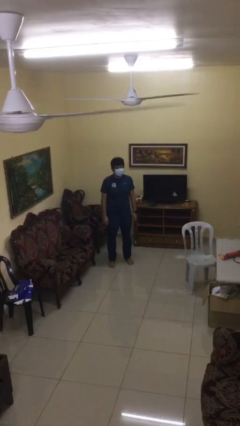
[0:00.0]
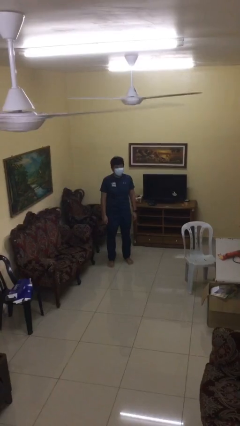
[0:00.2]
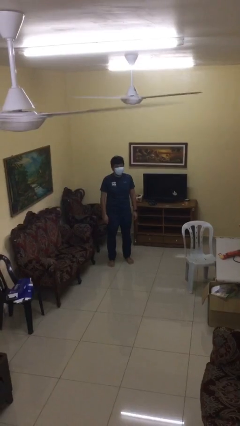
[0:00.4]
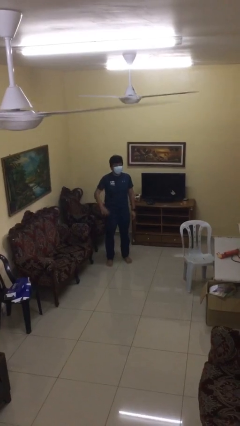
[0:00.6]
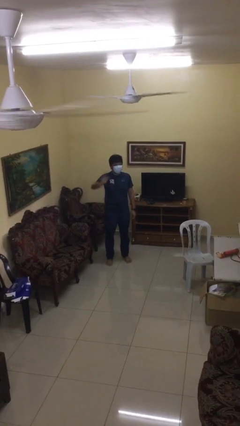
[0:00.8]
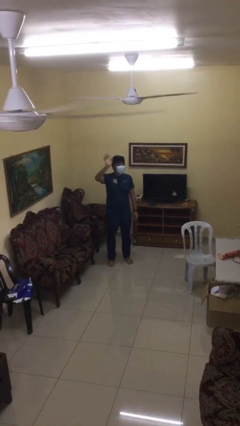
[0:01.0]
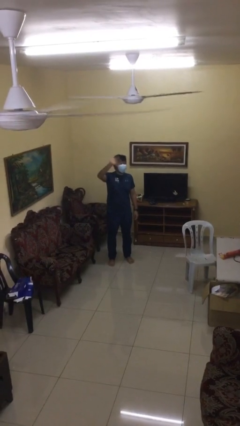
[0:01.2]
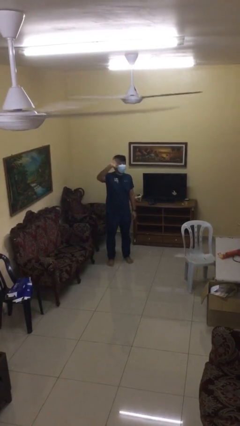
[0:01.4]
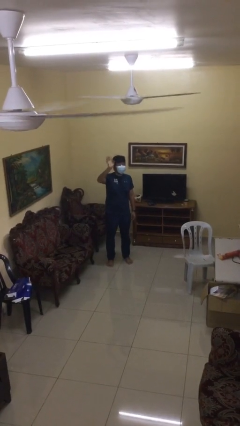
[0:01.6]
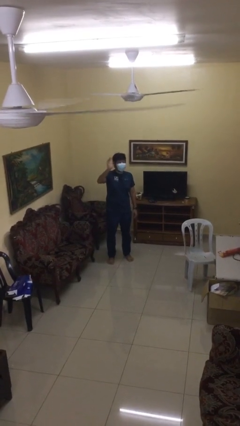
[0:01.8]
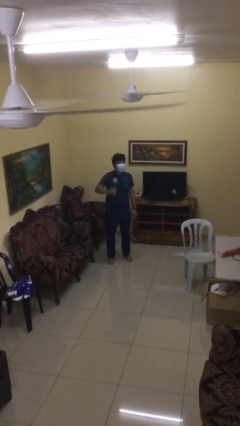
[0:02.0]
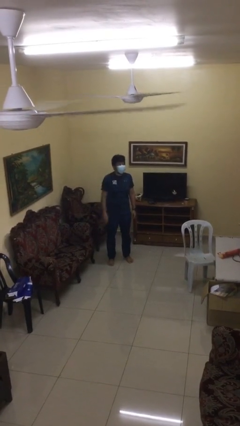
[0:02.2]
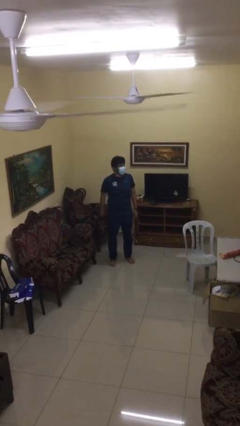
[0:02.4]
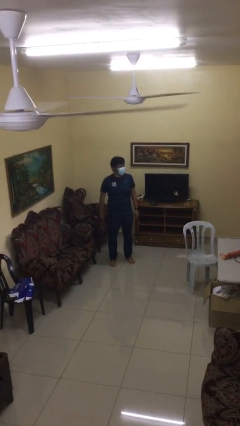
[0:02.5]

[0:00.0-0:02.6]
person waves at person

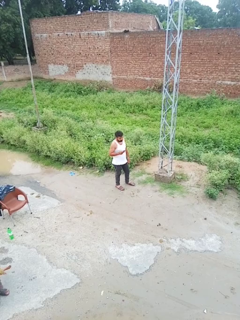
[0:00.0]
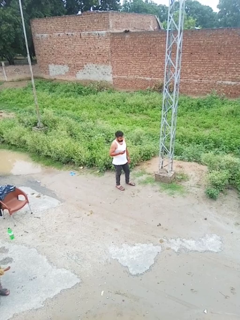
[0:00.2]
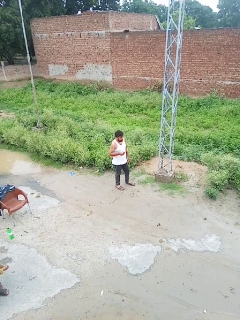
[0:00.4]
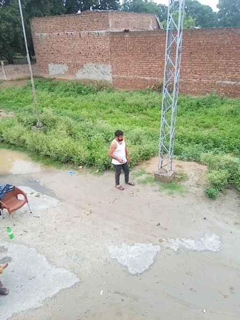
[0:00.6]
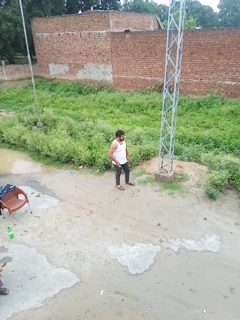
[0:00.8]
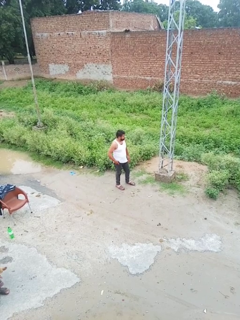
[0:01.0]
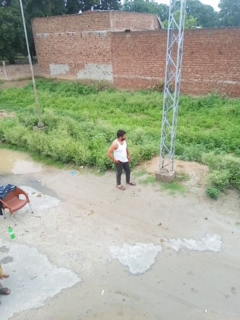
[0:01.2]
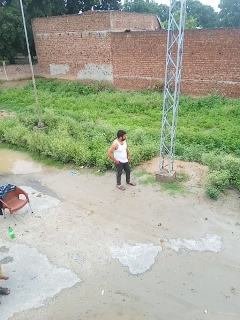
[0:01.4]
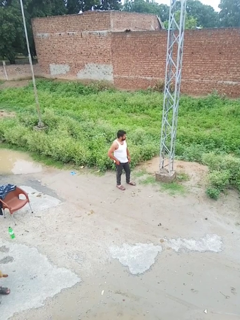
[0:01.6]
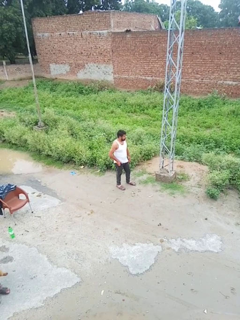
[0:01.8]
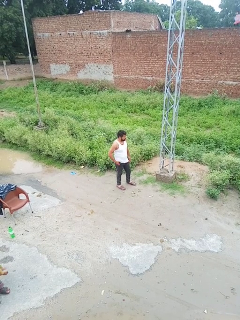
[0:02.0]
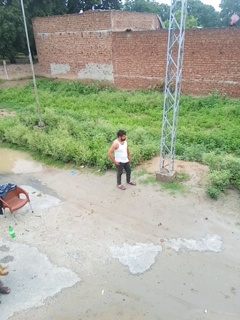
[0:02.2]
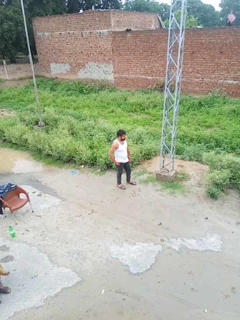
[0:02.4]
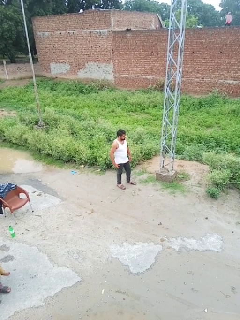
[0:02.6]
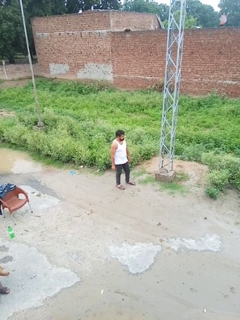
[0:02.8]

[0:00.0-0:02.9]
person puts phone into pocket

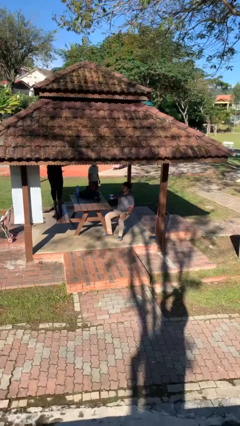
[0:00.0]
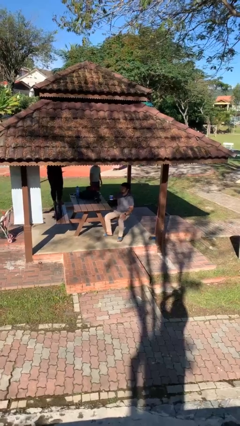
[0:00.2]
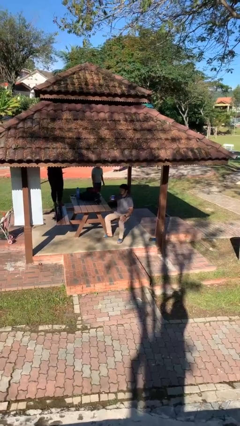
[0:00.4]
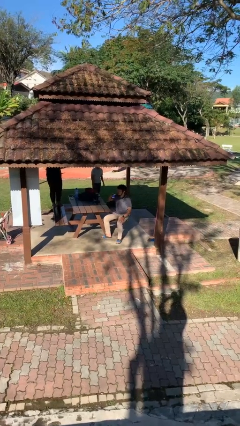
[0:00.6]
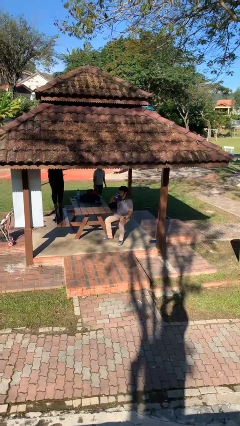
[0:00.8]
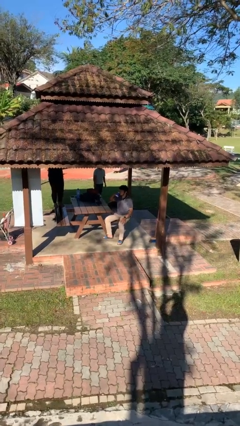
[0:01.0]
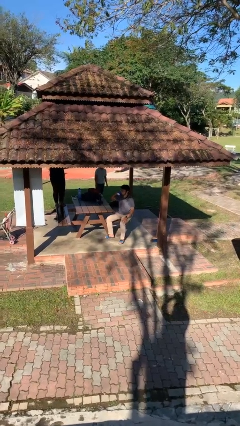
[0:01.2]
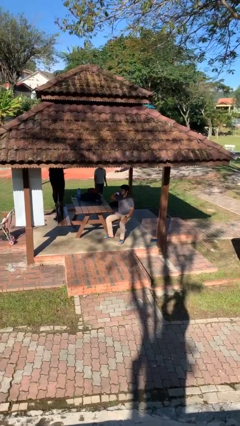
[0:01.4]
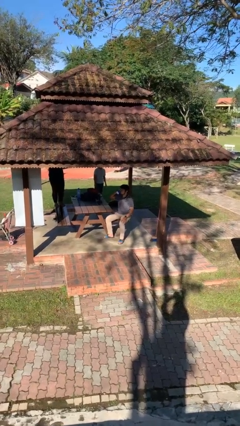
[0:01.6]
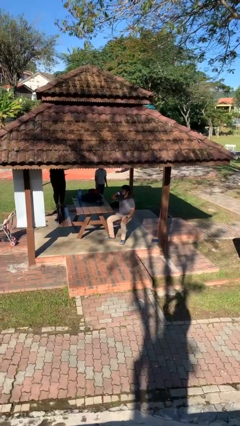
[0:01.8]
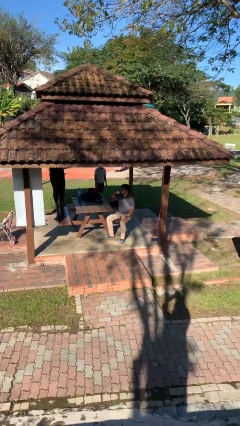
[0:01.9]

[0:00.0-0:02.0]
person drinks from mug

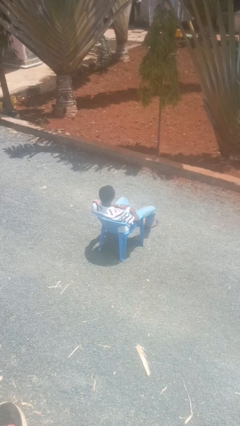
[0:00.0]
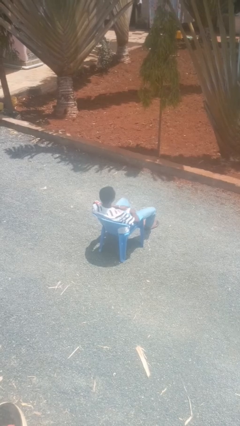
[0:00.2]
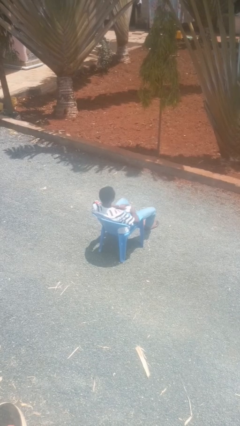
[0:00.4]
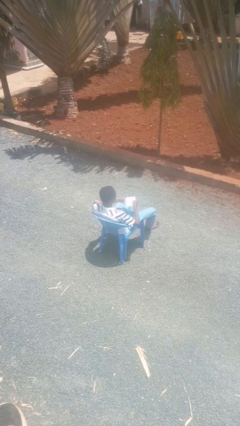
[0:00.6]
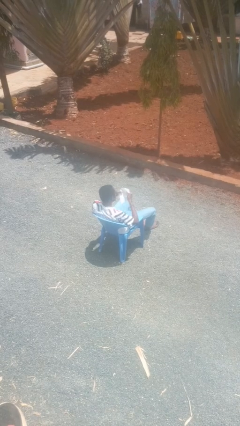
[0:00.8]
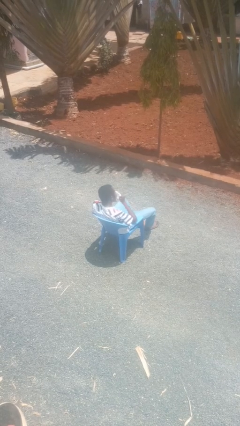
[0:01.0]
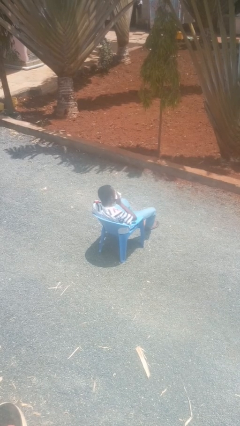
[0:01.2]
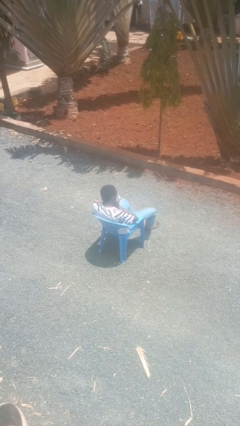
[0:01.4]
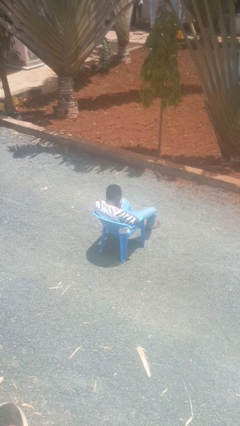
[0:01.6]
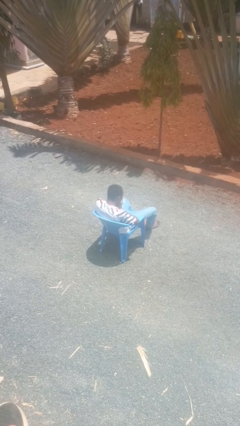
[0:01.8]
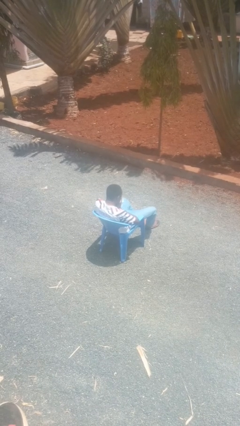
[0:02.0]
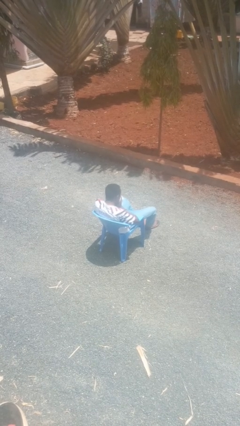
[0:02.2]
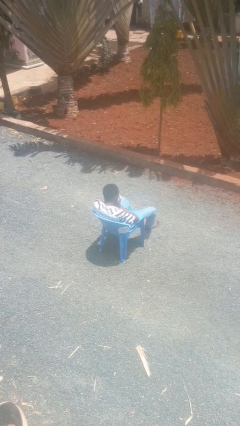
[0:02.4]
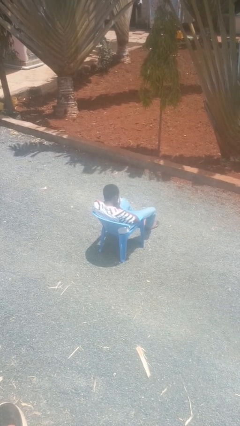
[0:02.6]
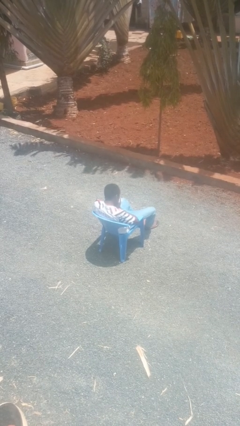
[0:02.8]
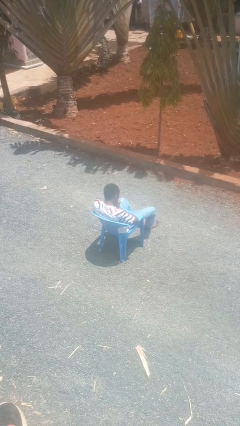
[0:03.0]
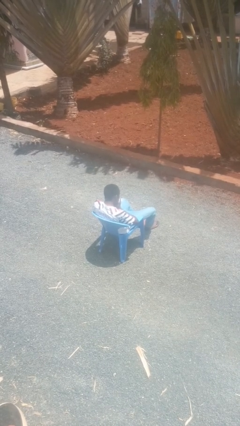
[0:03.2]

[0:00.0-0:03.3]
person blows nose

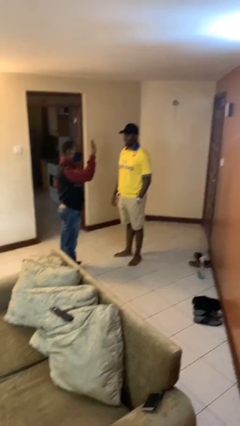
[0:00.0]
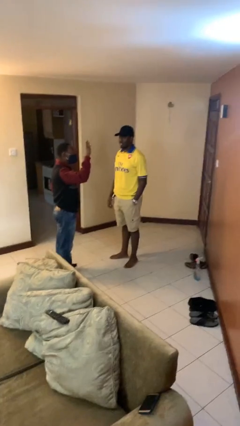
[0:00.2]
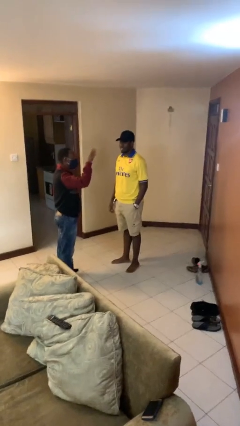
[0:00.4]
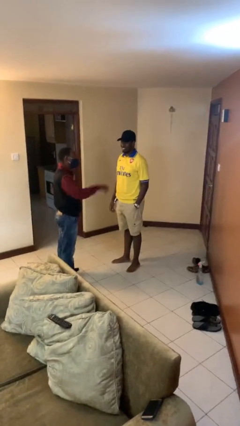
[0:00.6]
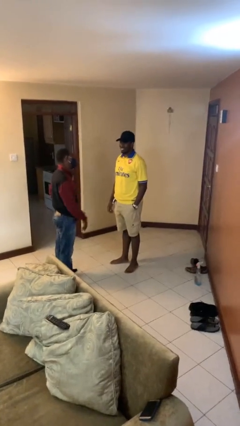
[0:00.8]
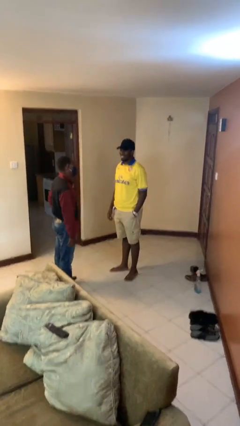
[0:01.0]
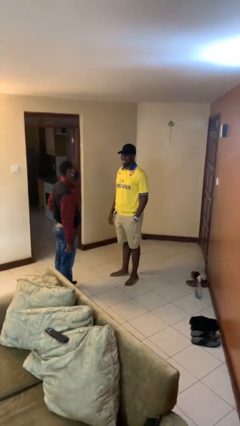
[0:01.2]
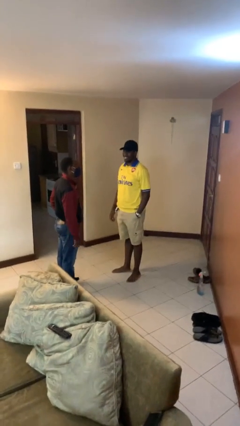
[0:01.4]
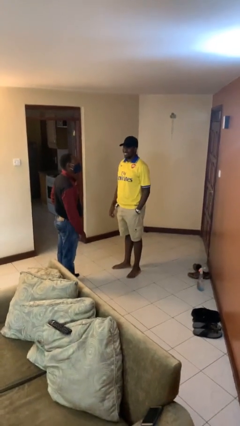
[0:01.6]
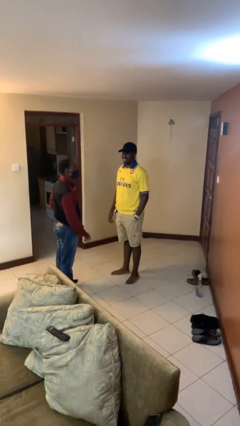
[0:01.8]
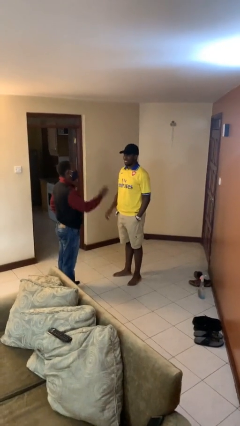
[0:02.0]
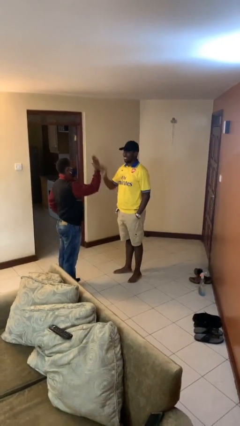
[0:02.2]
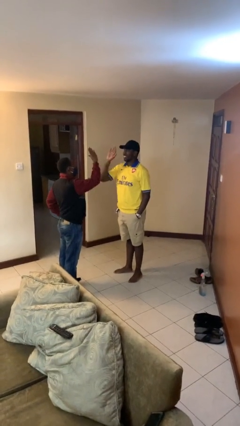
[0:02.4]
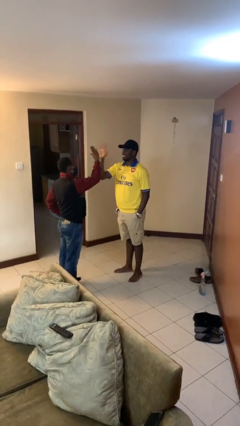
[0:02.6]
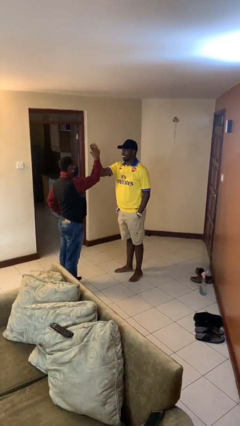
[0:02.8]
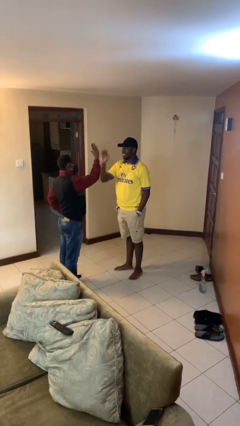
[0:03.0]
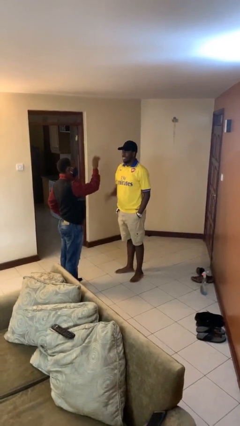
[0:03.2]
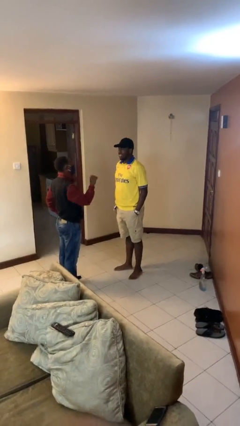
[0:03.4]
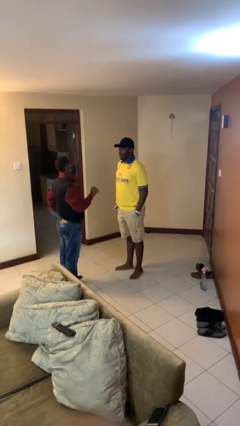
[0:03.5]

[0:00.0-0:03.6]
person highfives hand

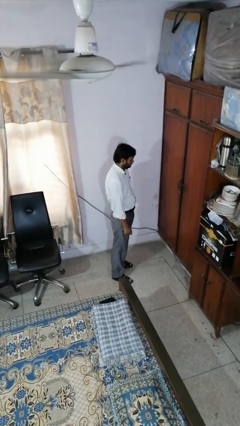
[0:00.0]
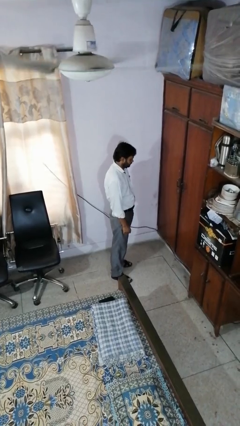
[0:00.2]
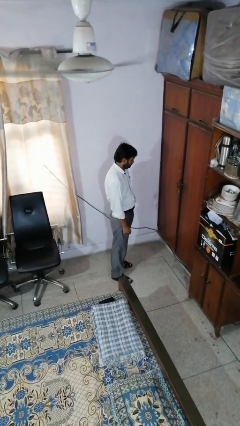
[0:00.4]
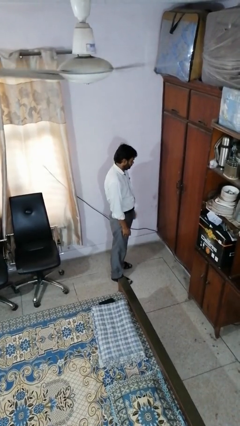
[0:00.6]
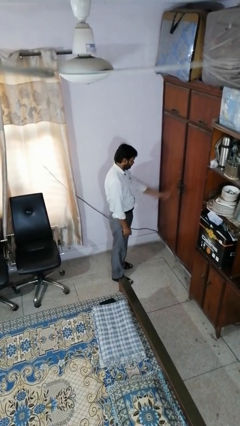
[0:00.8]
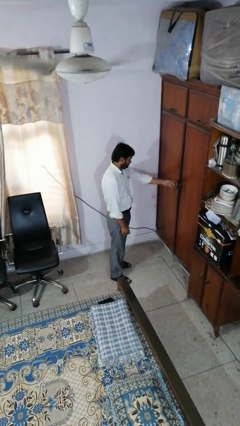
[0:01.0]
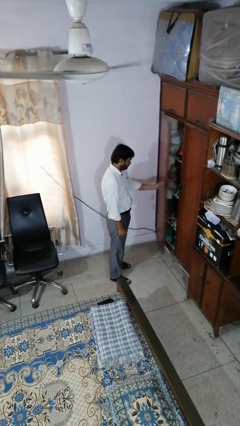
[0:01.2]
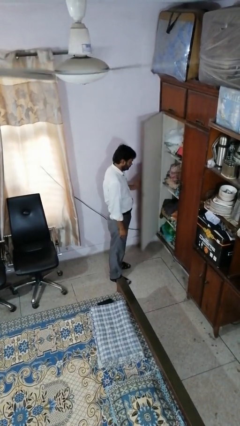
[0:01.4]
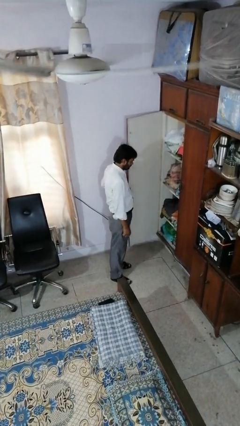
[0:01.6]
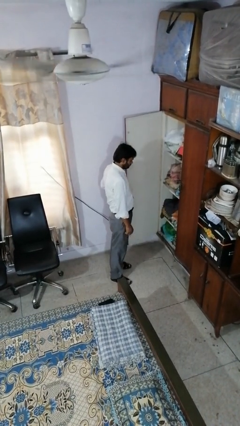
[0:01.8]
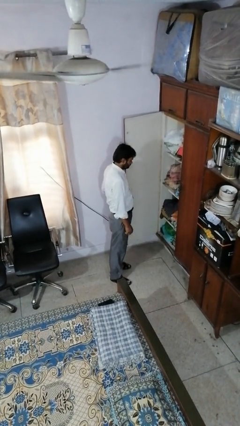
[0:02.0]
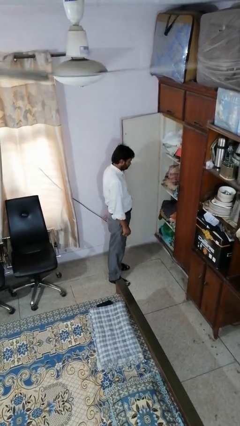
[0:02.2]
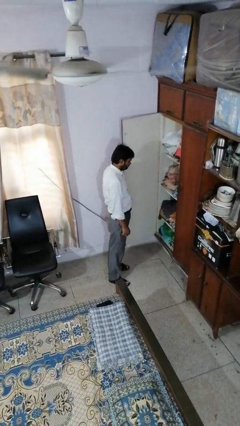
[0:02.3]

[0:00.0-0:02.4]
person opens closet door

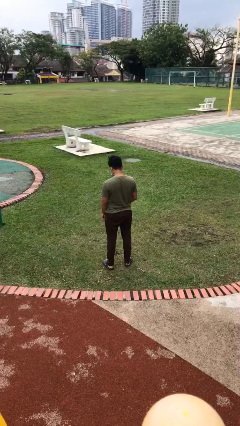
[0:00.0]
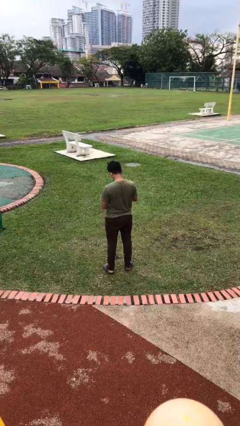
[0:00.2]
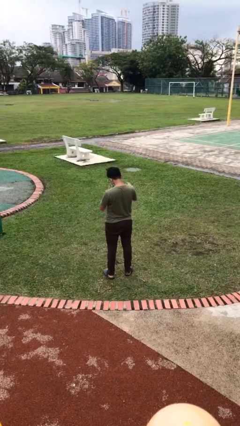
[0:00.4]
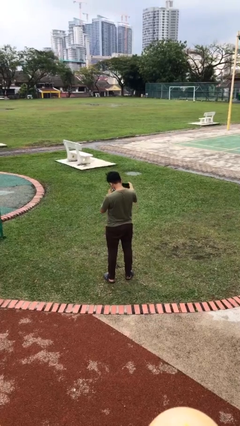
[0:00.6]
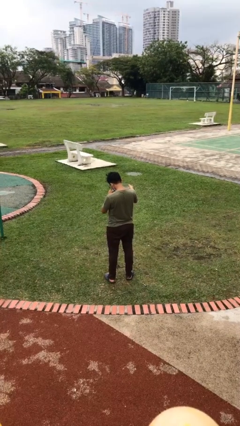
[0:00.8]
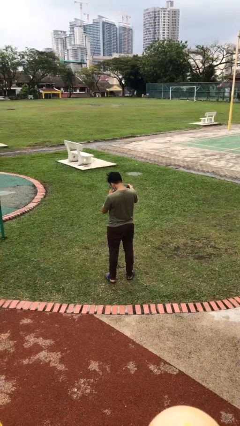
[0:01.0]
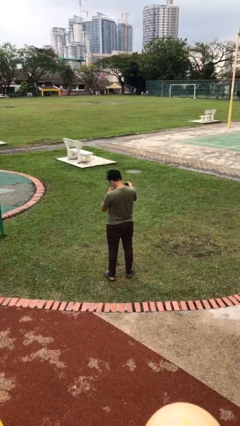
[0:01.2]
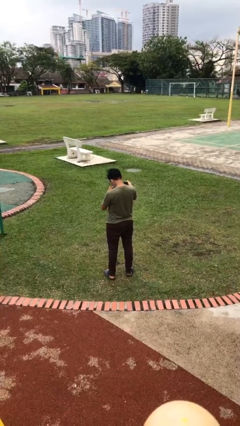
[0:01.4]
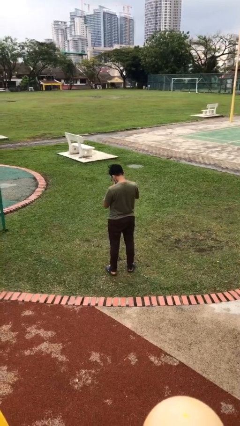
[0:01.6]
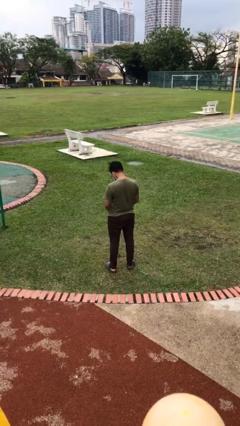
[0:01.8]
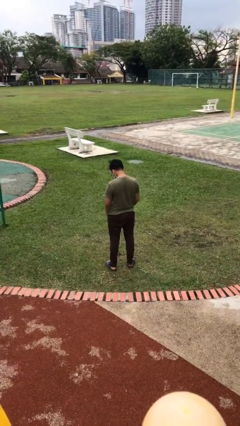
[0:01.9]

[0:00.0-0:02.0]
person takes selfie
